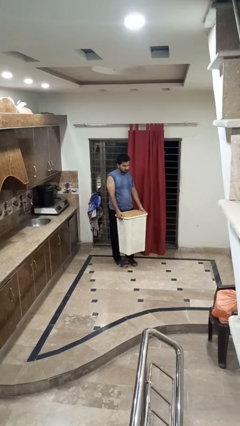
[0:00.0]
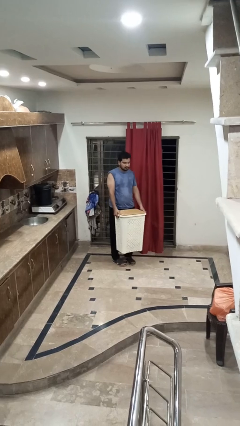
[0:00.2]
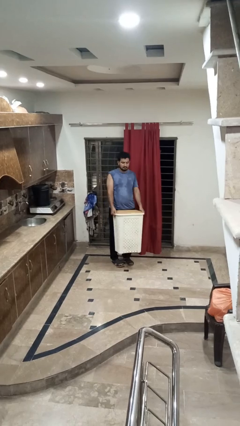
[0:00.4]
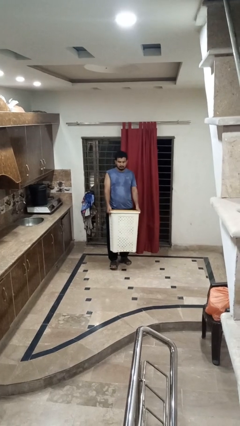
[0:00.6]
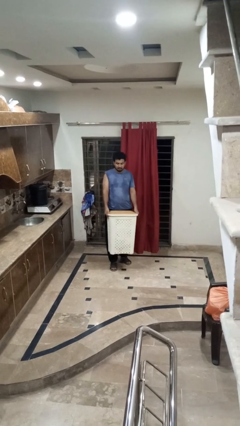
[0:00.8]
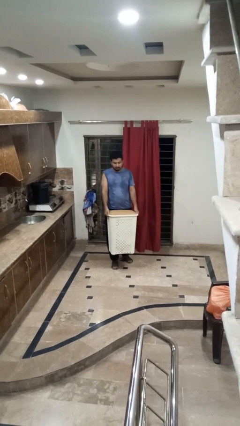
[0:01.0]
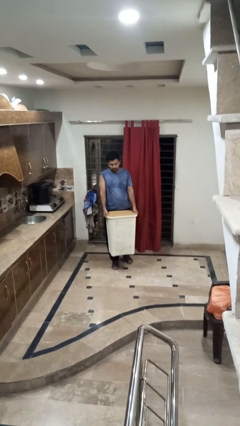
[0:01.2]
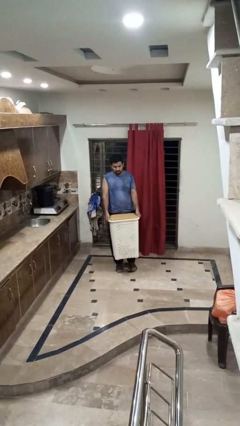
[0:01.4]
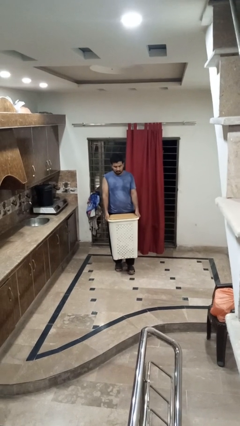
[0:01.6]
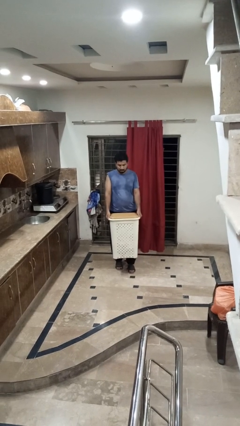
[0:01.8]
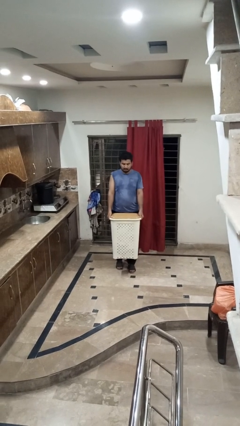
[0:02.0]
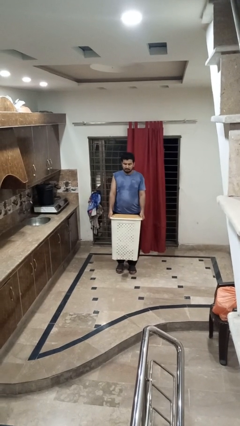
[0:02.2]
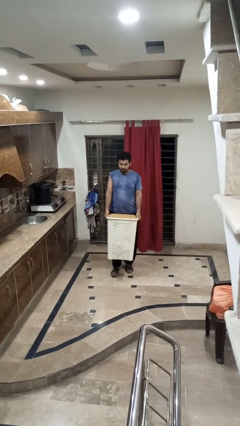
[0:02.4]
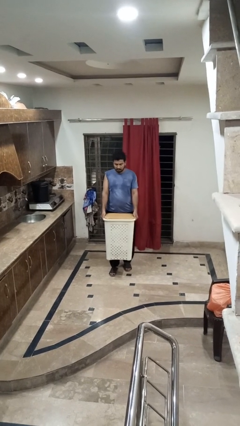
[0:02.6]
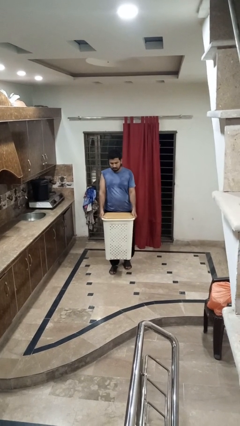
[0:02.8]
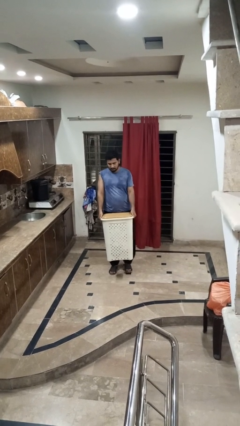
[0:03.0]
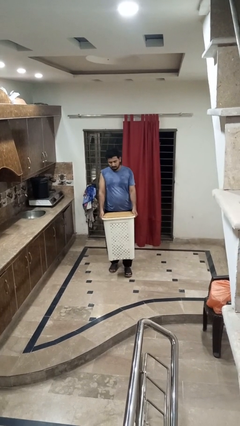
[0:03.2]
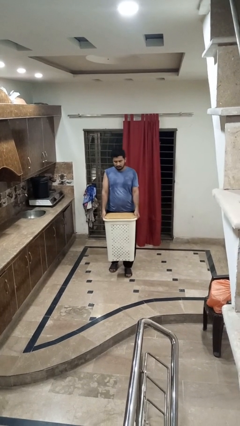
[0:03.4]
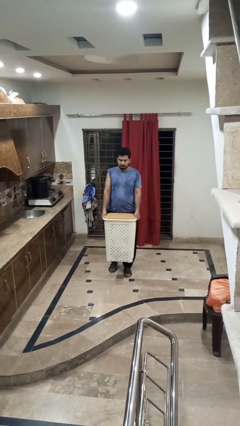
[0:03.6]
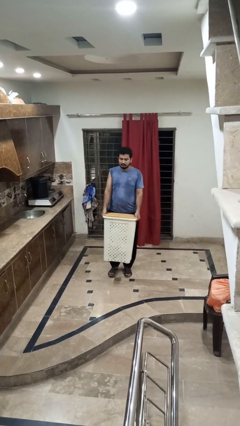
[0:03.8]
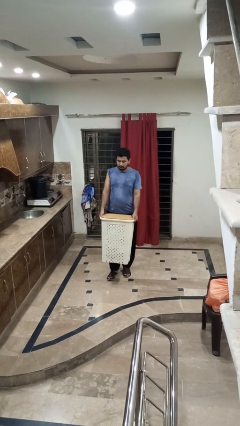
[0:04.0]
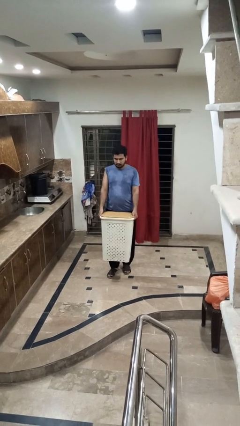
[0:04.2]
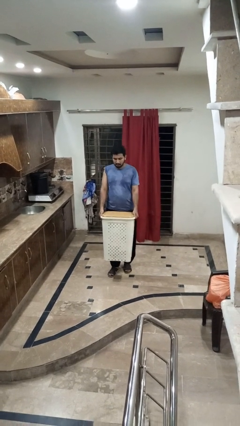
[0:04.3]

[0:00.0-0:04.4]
person carries laundry basket

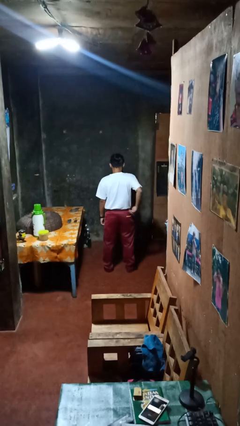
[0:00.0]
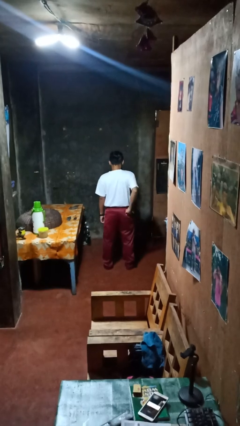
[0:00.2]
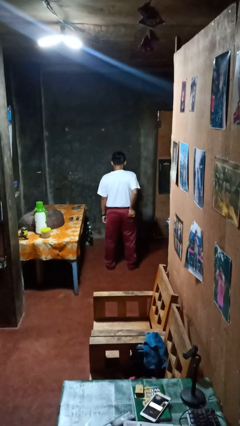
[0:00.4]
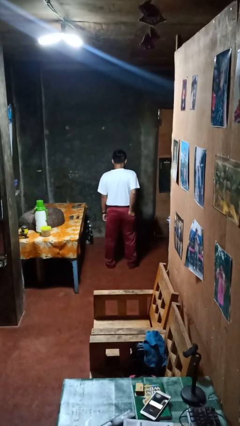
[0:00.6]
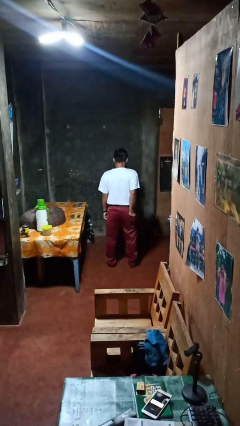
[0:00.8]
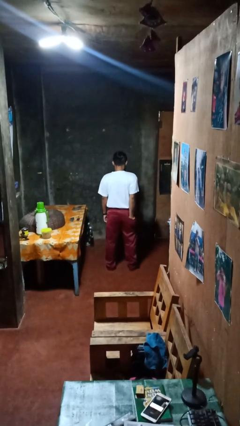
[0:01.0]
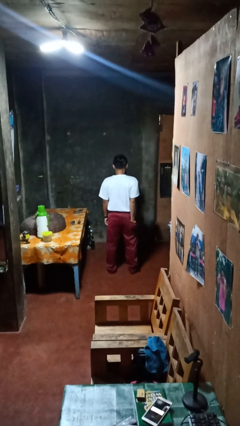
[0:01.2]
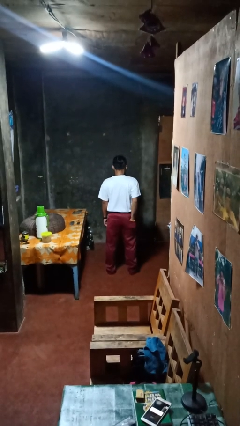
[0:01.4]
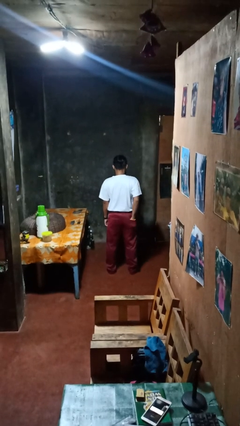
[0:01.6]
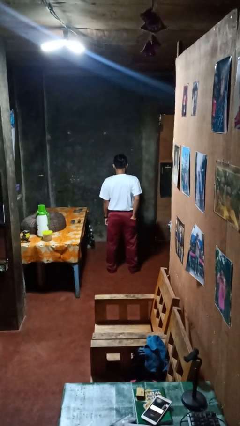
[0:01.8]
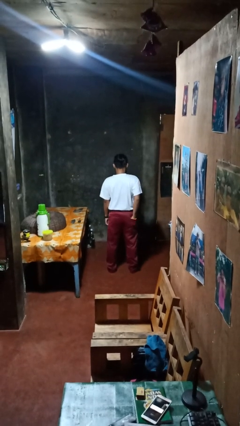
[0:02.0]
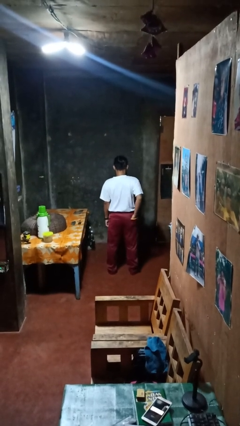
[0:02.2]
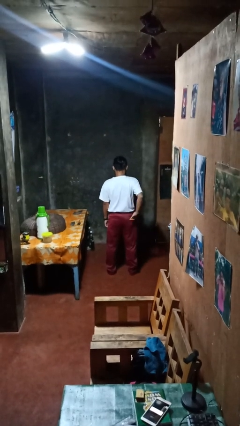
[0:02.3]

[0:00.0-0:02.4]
person puts hands in back pockets

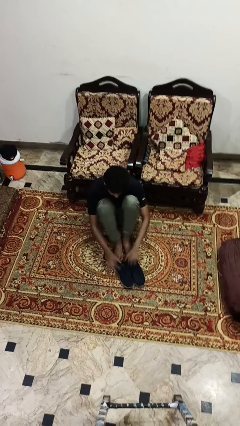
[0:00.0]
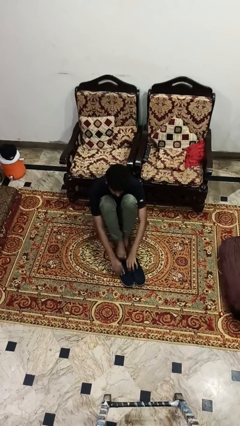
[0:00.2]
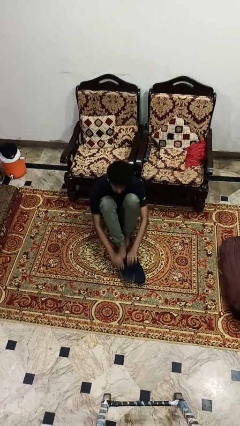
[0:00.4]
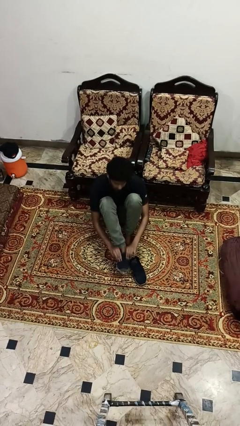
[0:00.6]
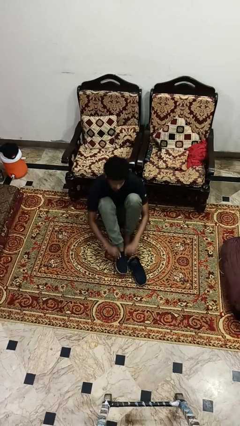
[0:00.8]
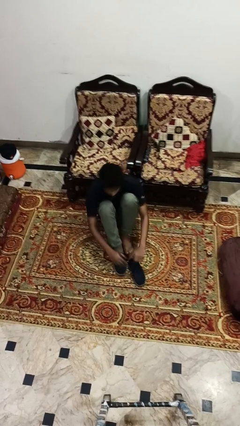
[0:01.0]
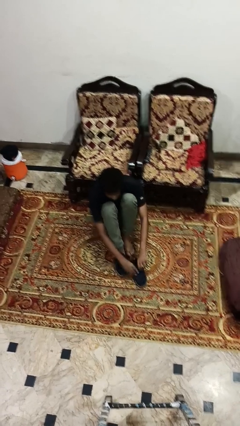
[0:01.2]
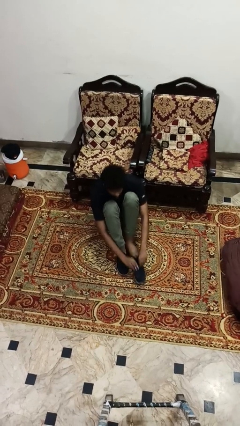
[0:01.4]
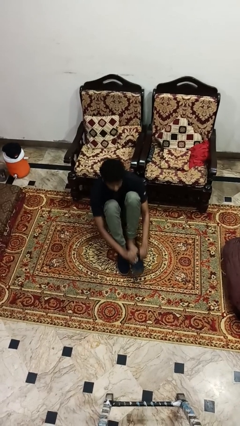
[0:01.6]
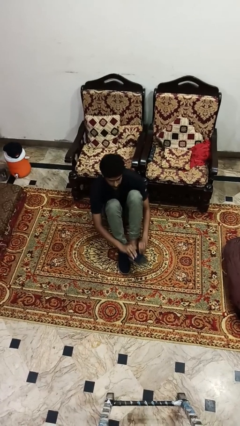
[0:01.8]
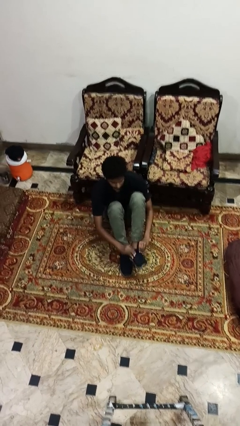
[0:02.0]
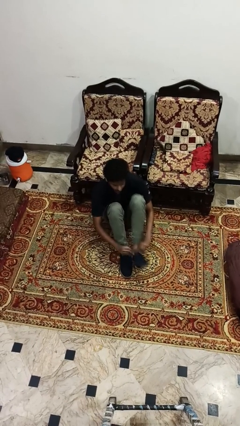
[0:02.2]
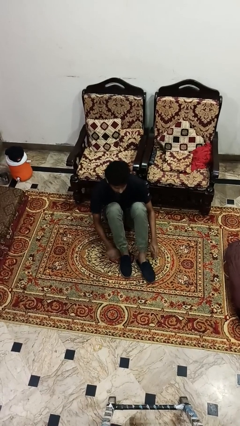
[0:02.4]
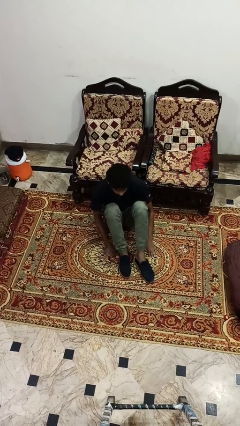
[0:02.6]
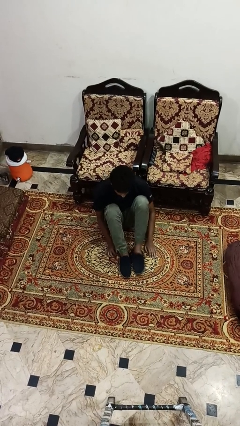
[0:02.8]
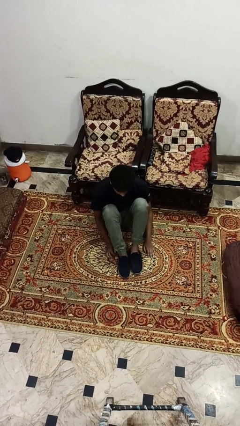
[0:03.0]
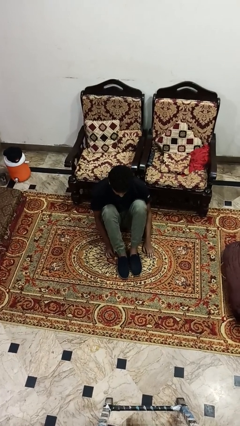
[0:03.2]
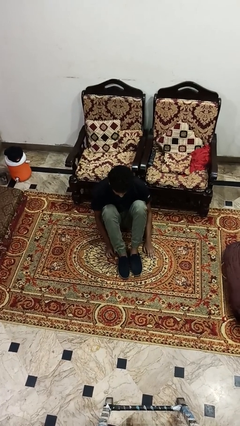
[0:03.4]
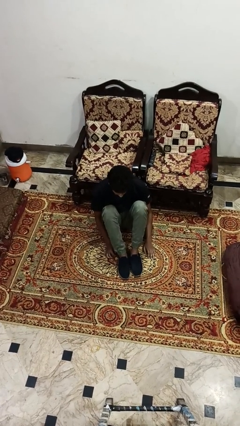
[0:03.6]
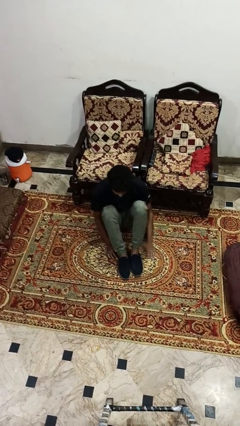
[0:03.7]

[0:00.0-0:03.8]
person puts on shoes

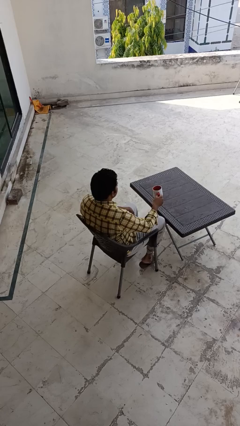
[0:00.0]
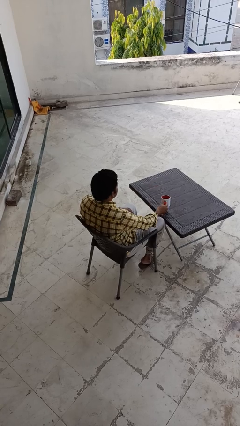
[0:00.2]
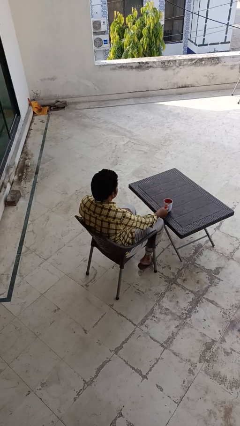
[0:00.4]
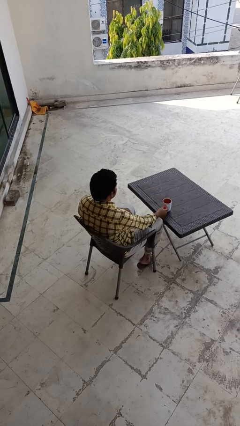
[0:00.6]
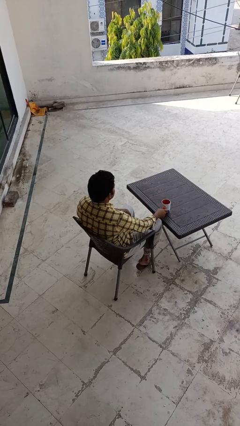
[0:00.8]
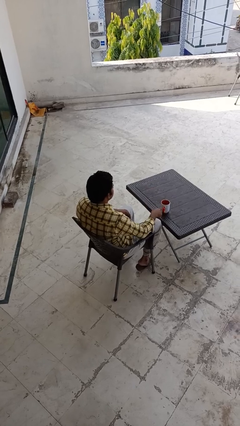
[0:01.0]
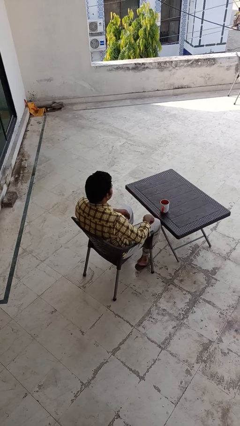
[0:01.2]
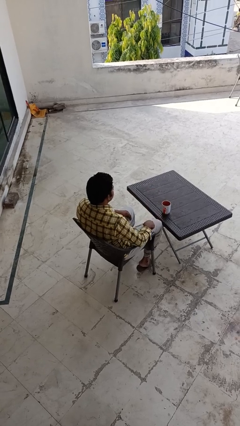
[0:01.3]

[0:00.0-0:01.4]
person puts down object on table

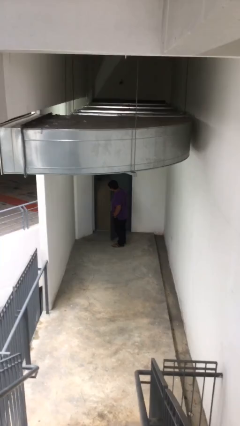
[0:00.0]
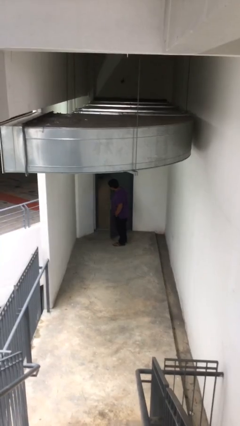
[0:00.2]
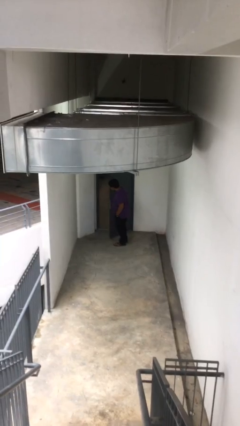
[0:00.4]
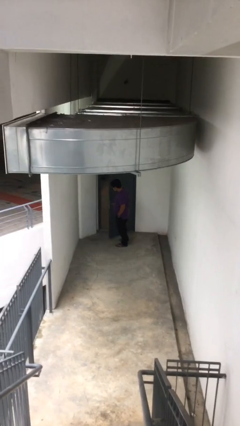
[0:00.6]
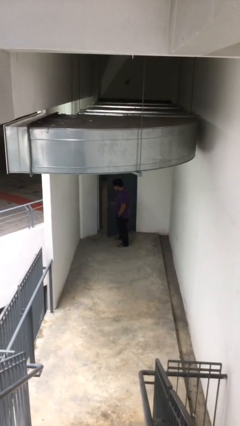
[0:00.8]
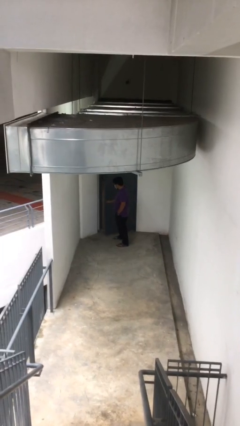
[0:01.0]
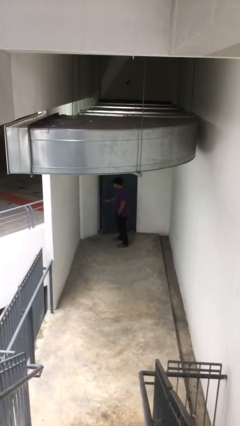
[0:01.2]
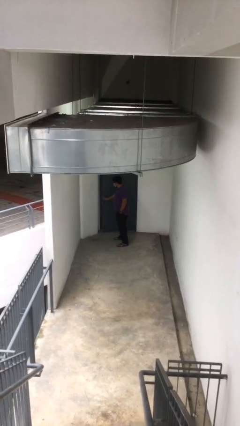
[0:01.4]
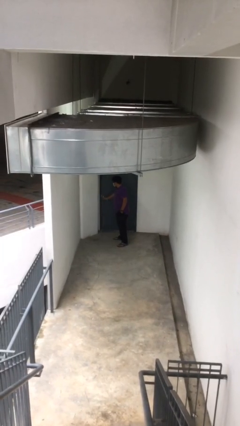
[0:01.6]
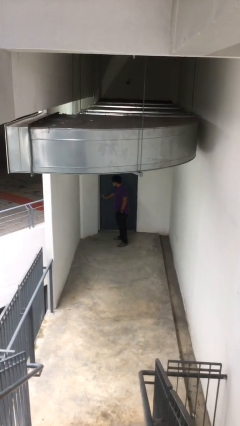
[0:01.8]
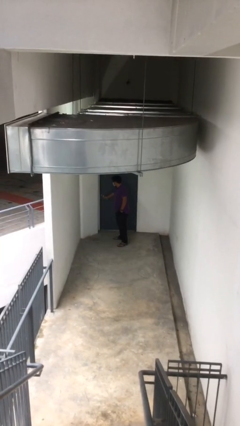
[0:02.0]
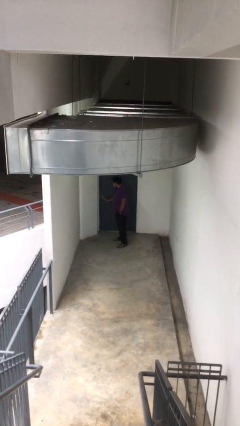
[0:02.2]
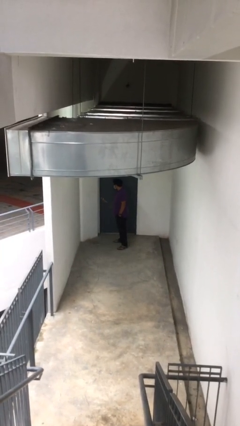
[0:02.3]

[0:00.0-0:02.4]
person closes facility door

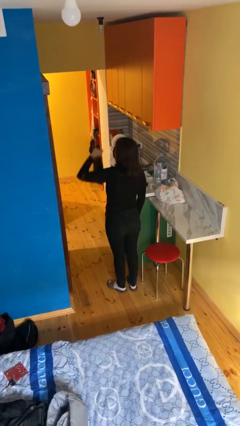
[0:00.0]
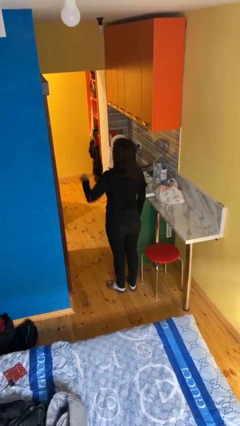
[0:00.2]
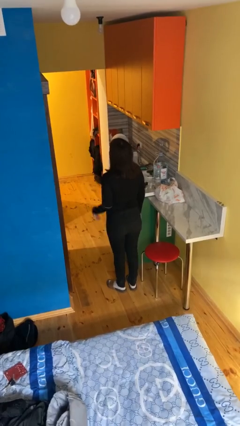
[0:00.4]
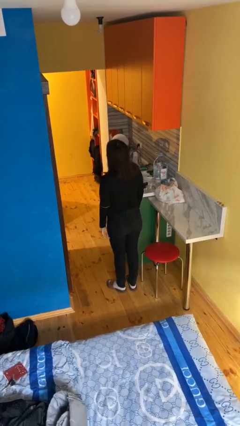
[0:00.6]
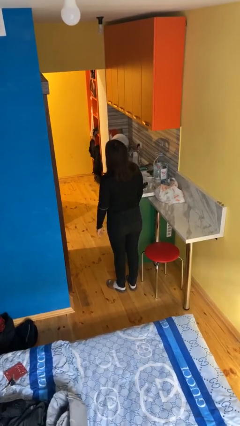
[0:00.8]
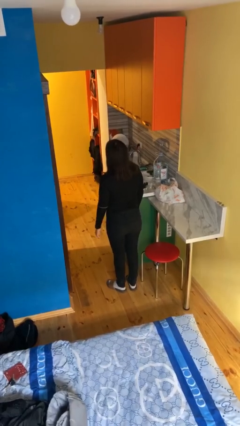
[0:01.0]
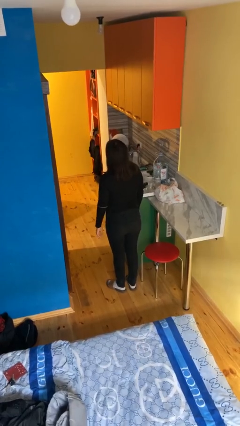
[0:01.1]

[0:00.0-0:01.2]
person gestures lower hand

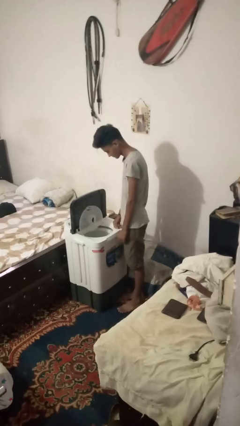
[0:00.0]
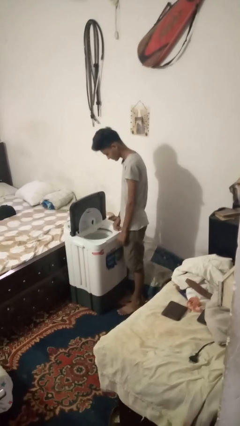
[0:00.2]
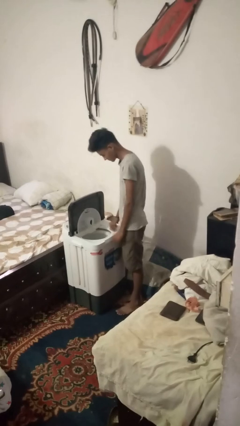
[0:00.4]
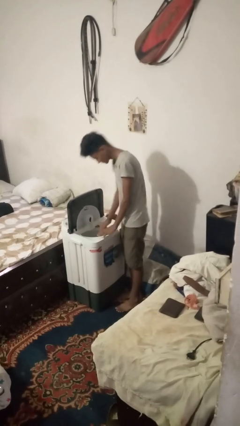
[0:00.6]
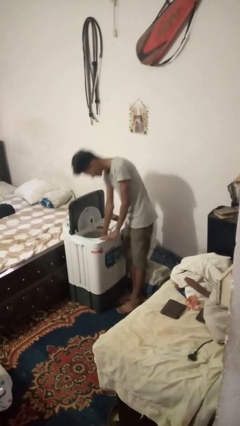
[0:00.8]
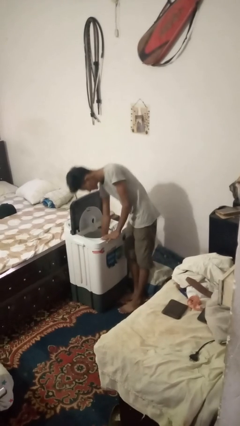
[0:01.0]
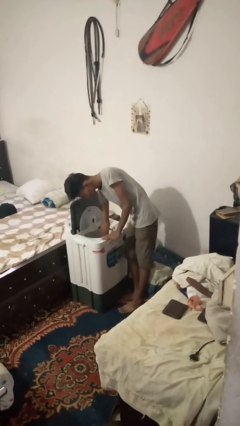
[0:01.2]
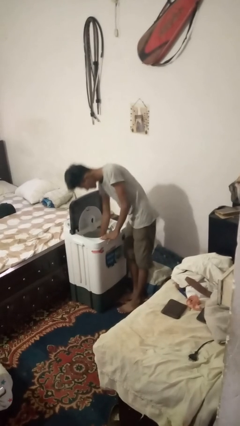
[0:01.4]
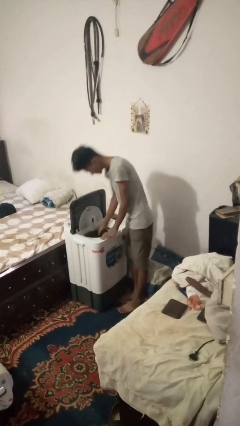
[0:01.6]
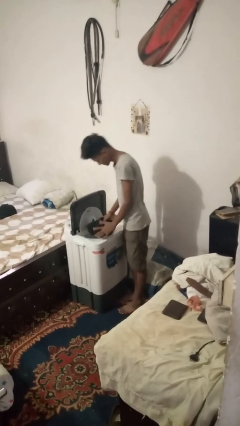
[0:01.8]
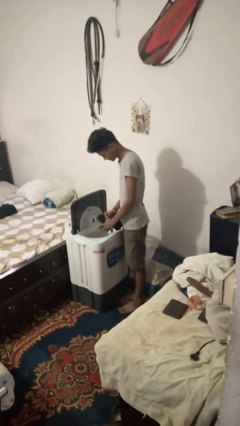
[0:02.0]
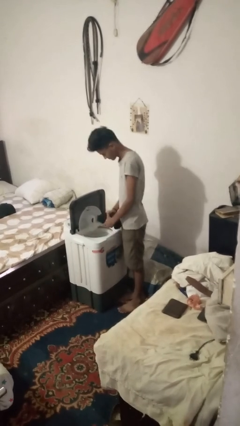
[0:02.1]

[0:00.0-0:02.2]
person unloads clotheswasher
